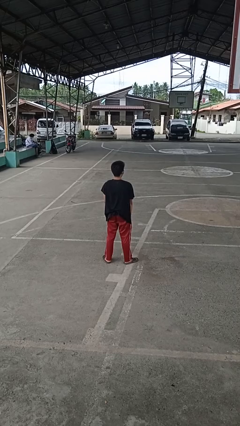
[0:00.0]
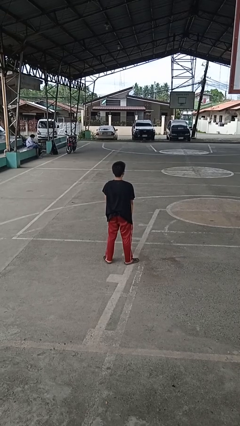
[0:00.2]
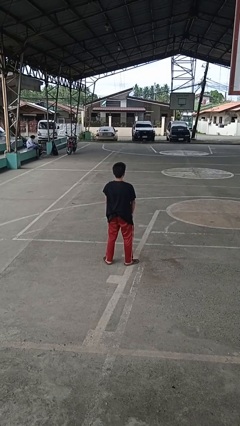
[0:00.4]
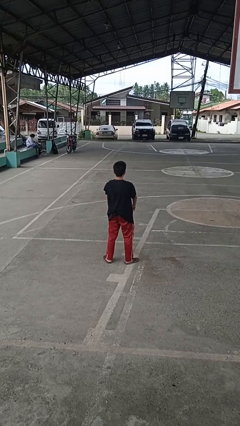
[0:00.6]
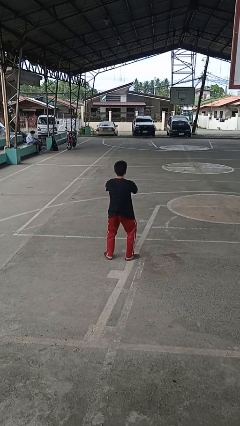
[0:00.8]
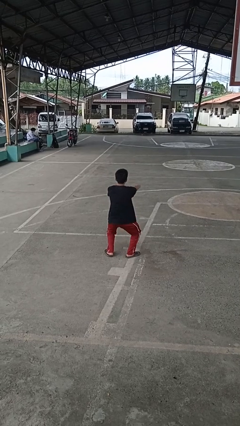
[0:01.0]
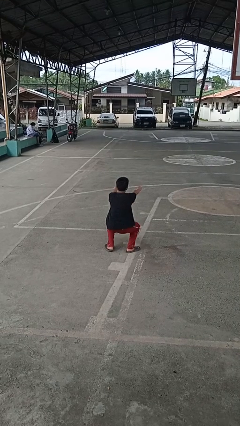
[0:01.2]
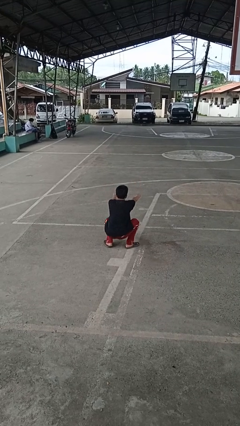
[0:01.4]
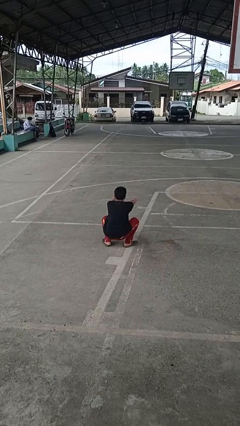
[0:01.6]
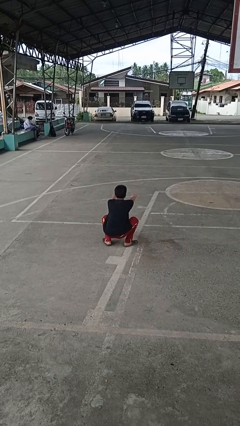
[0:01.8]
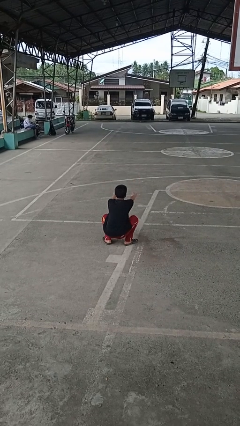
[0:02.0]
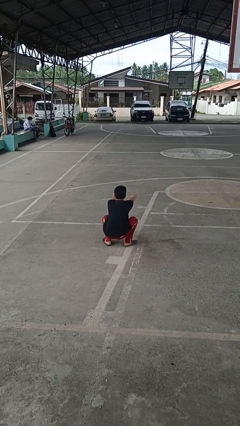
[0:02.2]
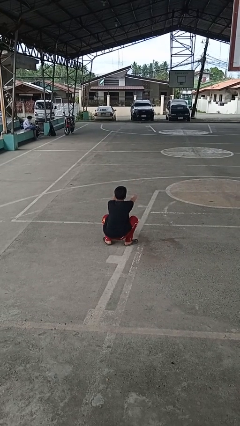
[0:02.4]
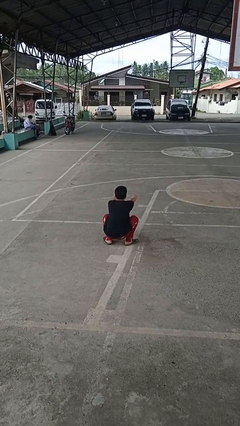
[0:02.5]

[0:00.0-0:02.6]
person squats

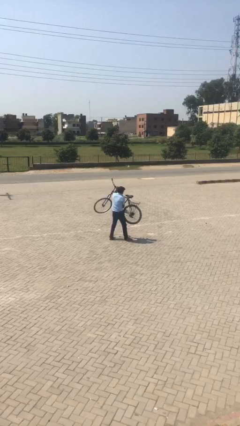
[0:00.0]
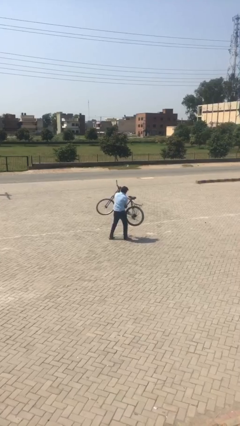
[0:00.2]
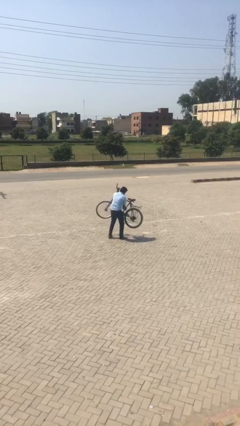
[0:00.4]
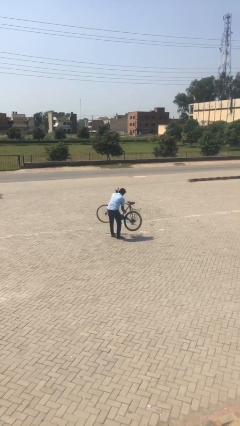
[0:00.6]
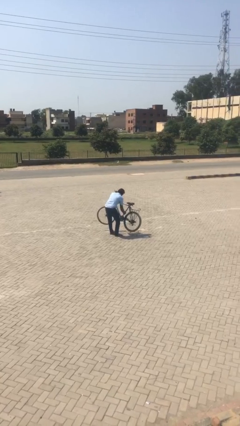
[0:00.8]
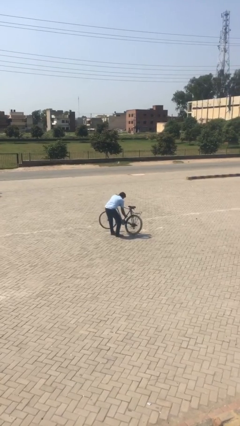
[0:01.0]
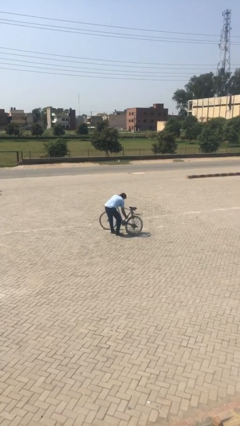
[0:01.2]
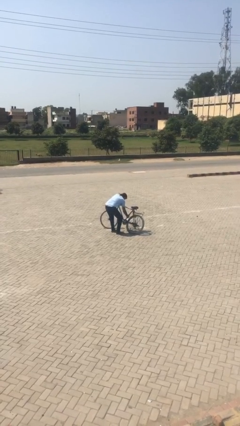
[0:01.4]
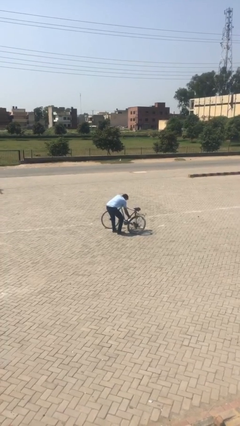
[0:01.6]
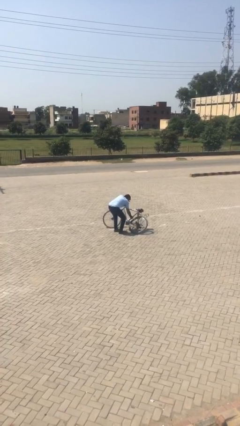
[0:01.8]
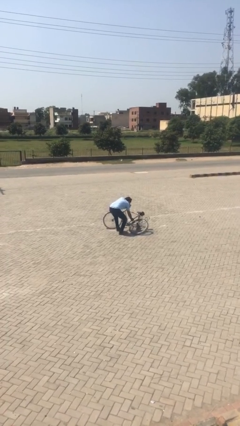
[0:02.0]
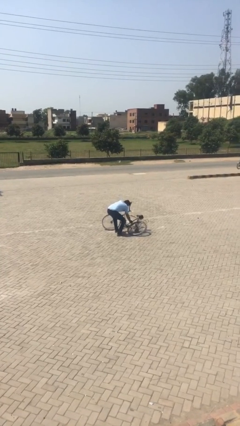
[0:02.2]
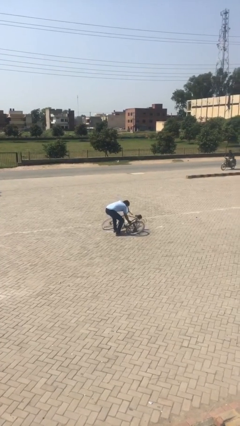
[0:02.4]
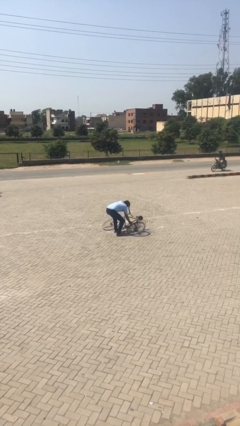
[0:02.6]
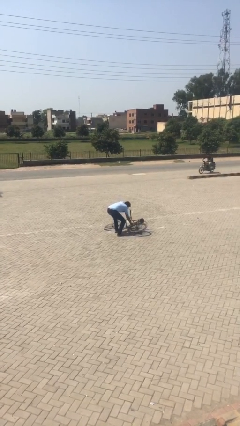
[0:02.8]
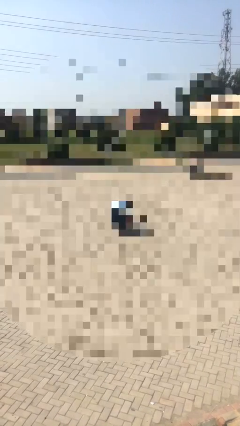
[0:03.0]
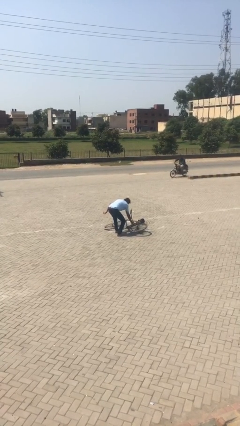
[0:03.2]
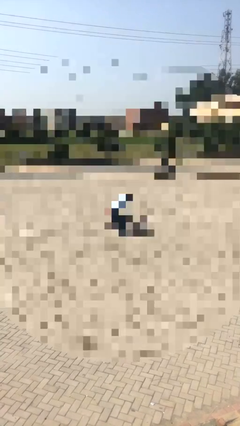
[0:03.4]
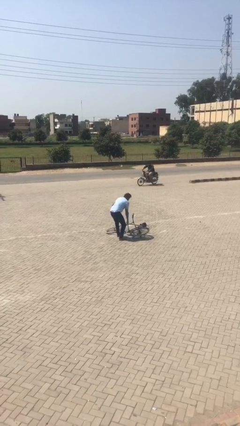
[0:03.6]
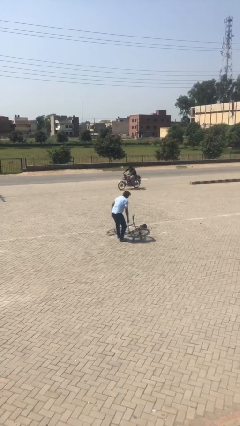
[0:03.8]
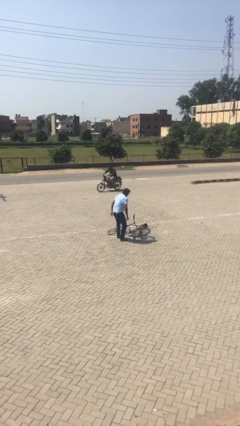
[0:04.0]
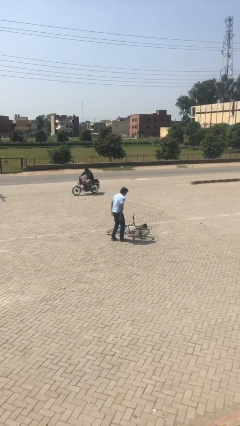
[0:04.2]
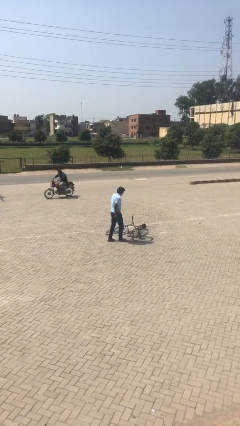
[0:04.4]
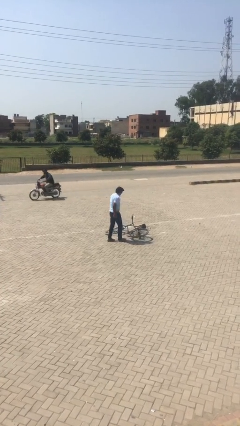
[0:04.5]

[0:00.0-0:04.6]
person puts down object on floor

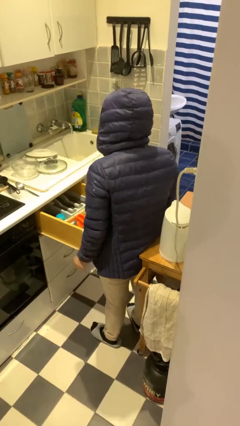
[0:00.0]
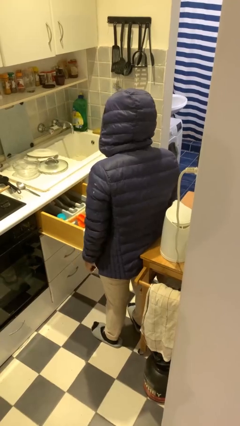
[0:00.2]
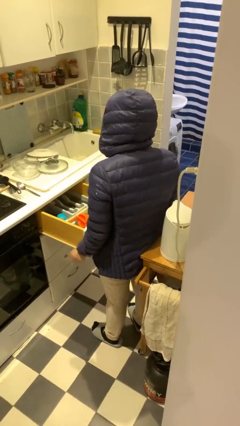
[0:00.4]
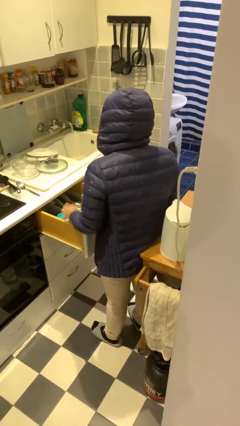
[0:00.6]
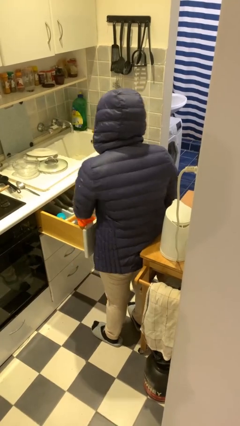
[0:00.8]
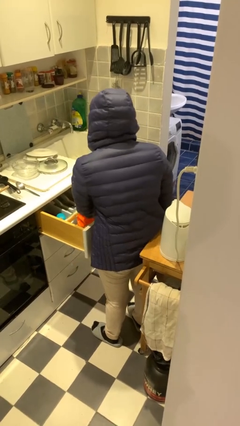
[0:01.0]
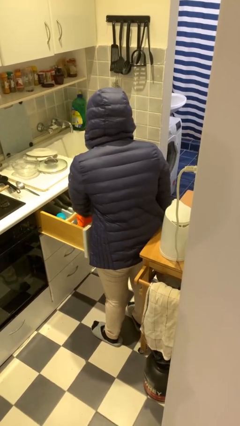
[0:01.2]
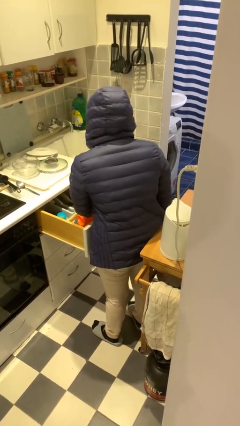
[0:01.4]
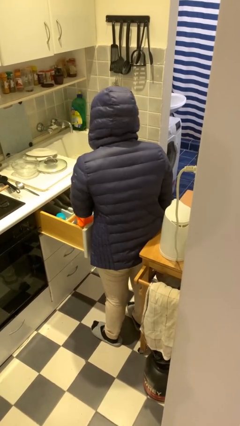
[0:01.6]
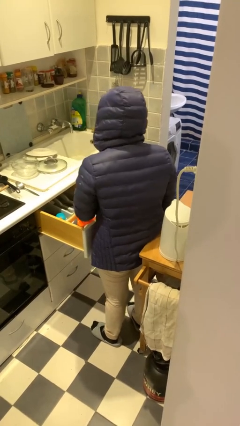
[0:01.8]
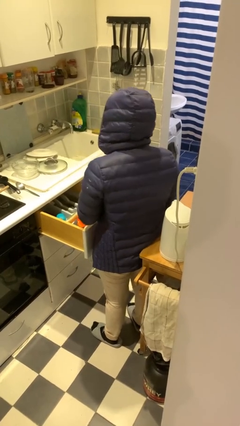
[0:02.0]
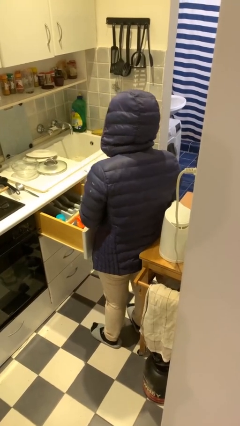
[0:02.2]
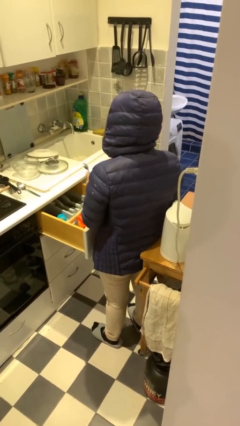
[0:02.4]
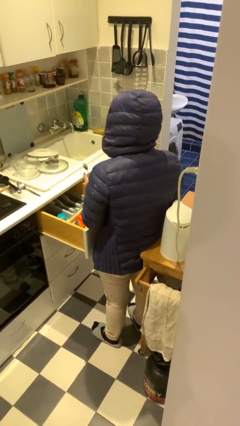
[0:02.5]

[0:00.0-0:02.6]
person takes object from kitchen drawer

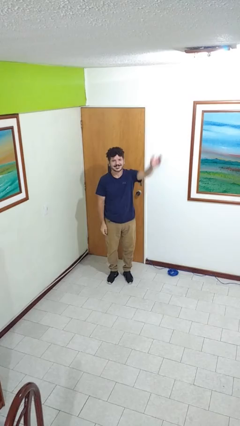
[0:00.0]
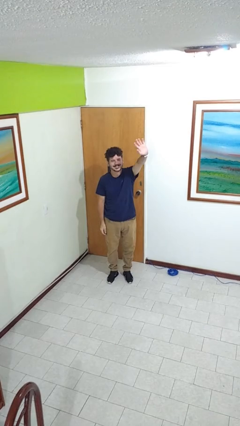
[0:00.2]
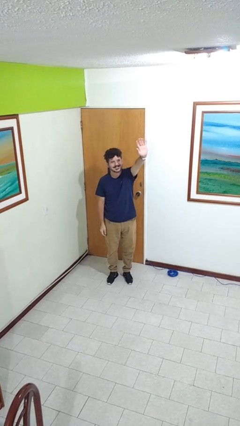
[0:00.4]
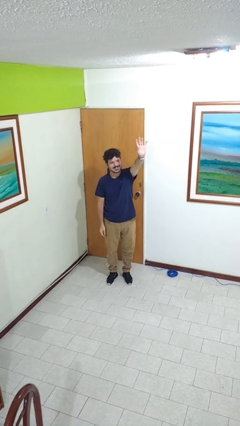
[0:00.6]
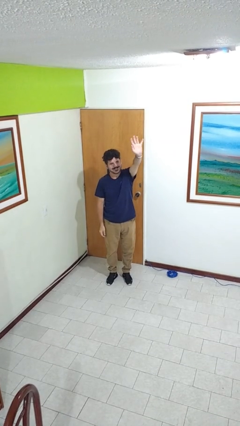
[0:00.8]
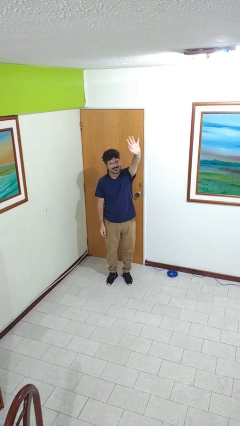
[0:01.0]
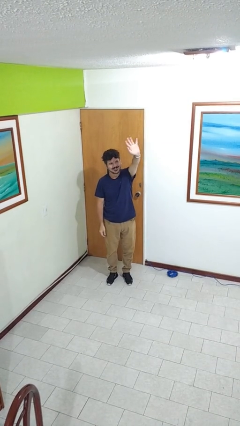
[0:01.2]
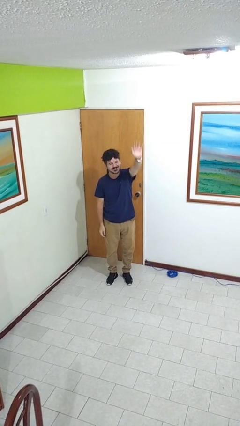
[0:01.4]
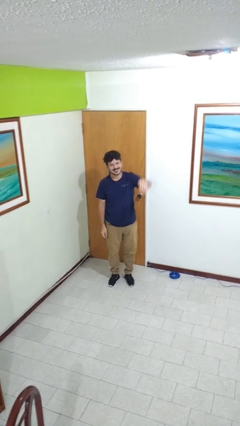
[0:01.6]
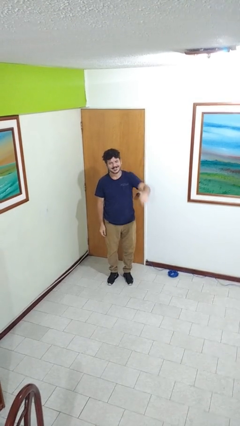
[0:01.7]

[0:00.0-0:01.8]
person waves at person

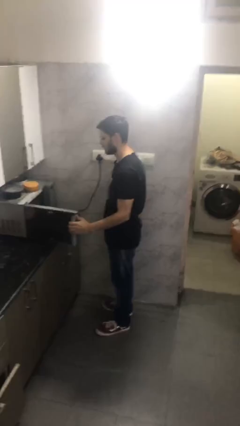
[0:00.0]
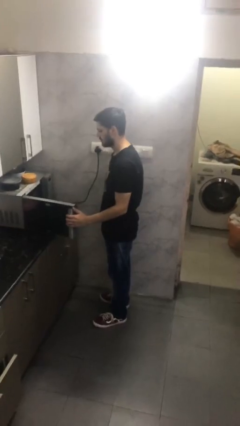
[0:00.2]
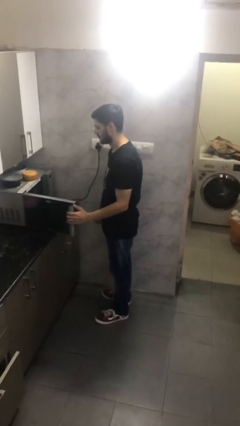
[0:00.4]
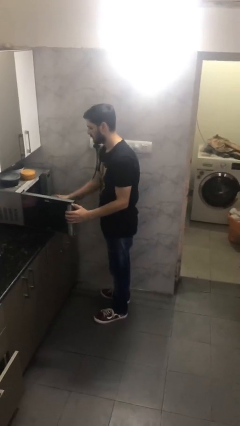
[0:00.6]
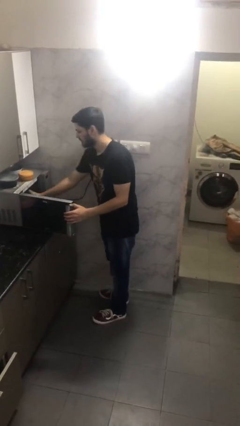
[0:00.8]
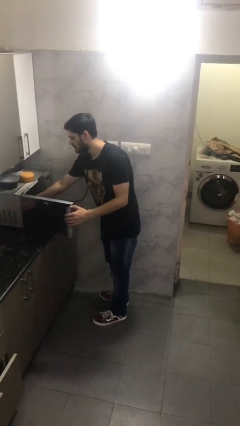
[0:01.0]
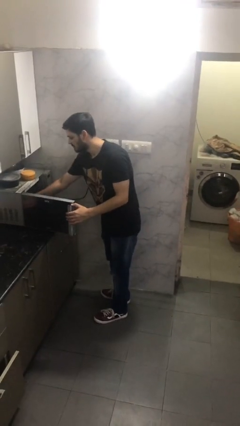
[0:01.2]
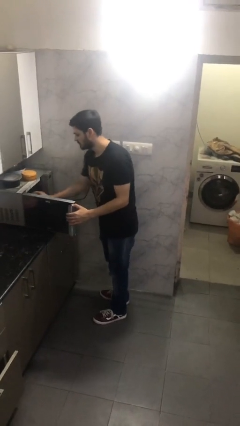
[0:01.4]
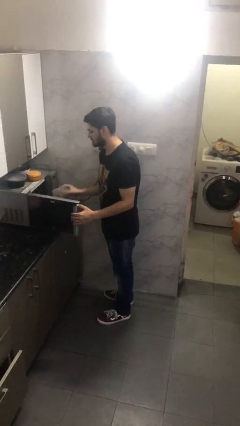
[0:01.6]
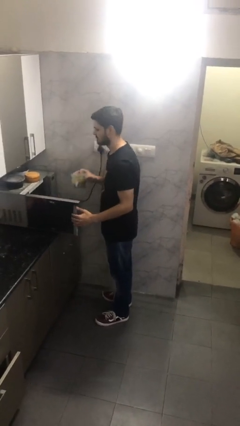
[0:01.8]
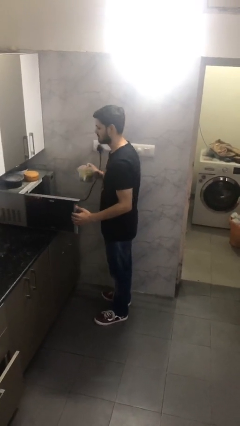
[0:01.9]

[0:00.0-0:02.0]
person takes object from microwave

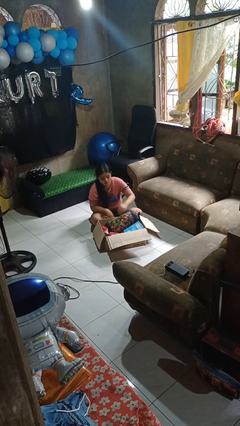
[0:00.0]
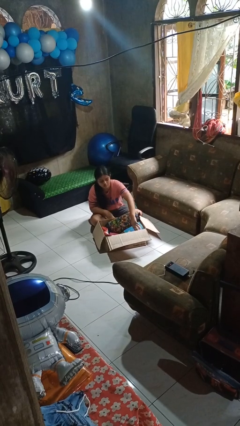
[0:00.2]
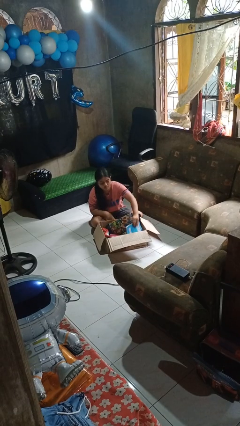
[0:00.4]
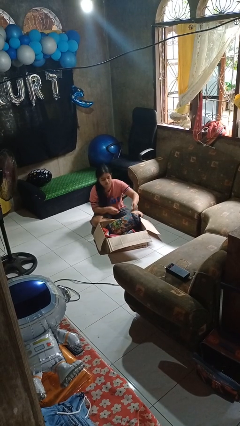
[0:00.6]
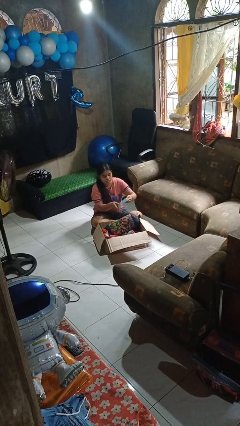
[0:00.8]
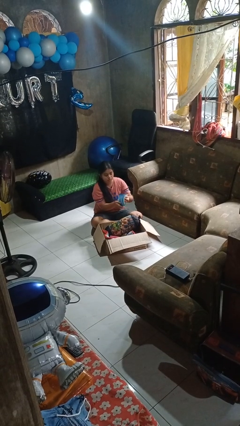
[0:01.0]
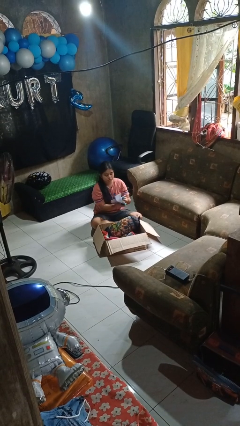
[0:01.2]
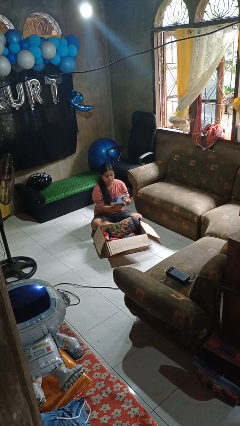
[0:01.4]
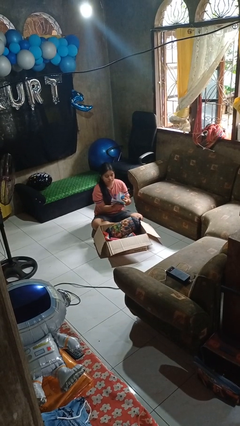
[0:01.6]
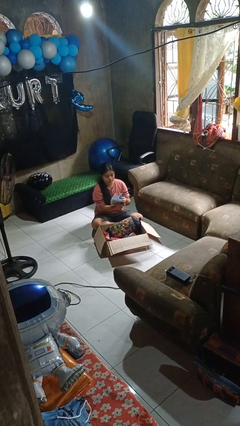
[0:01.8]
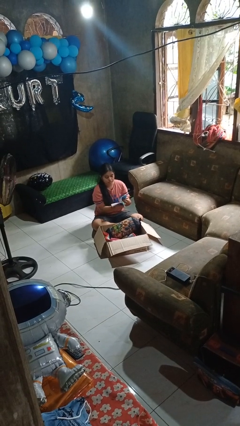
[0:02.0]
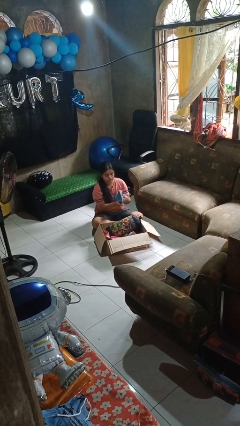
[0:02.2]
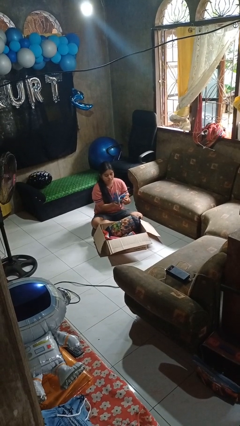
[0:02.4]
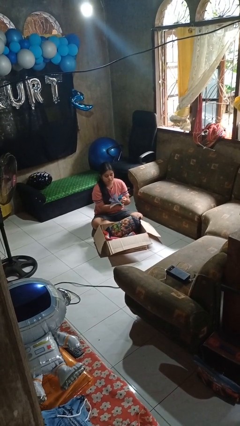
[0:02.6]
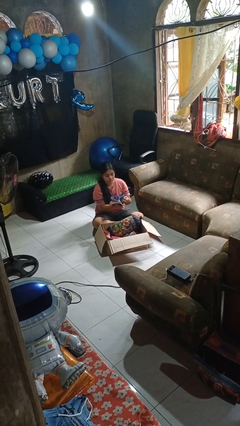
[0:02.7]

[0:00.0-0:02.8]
person takes object from box

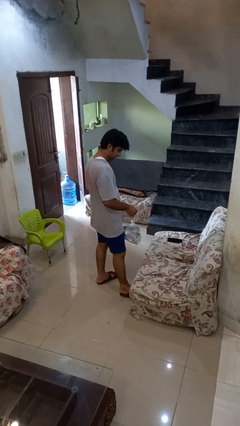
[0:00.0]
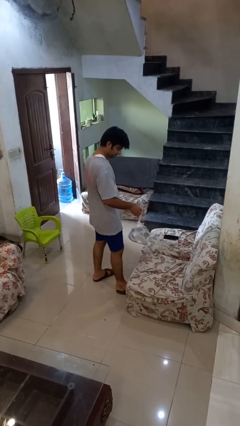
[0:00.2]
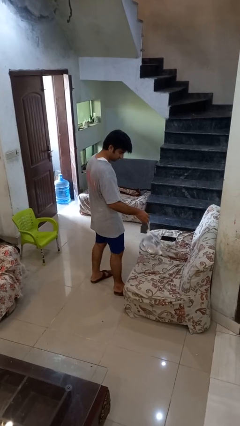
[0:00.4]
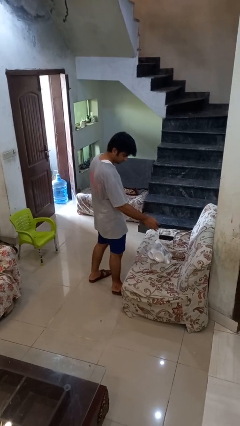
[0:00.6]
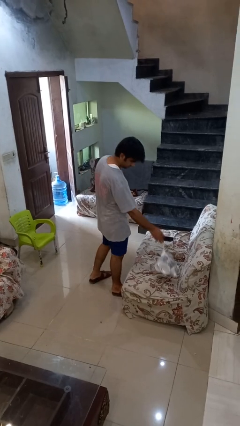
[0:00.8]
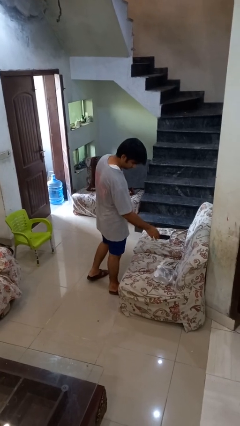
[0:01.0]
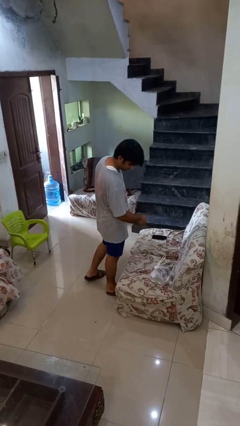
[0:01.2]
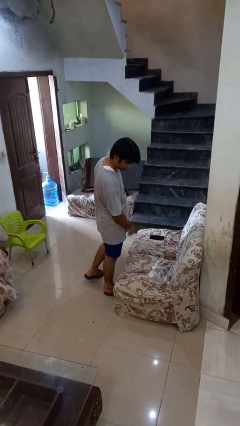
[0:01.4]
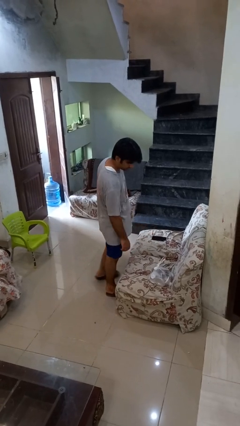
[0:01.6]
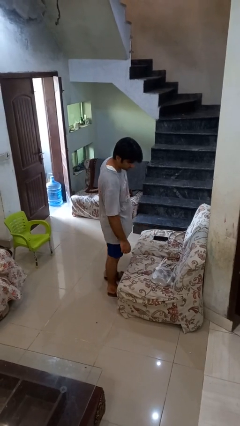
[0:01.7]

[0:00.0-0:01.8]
person puts down object on couch
